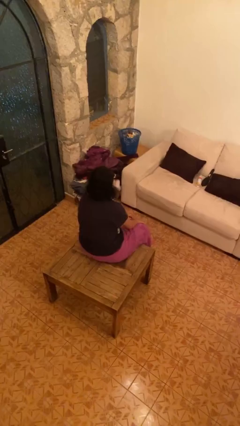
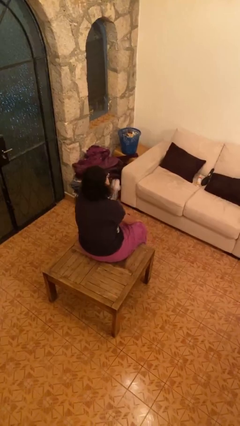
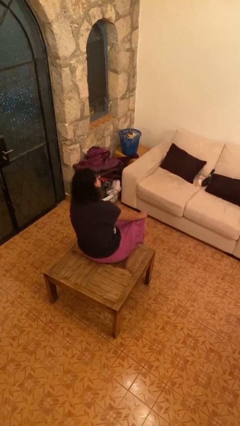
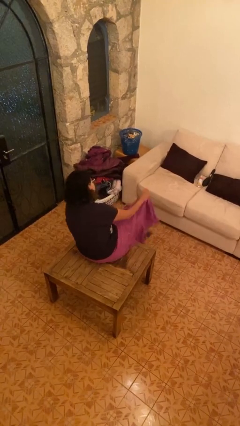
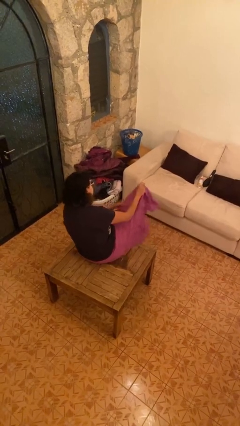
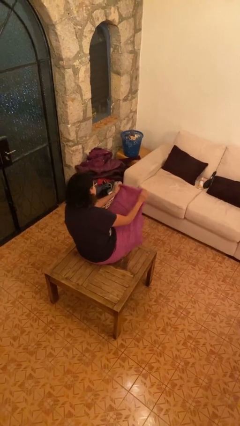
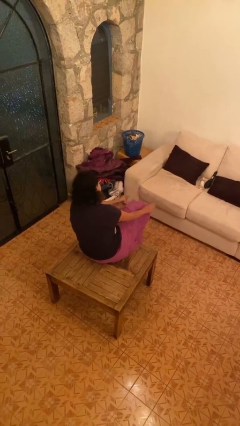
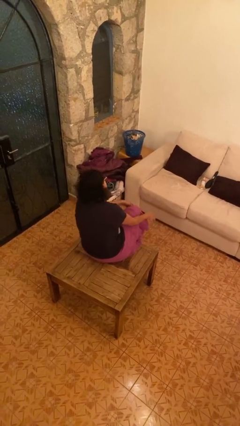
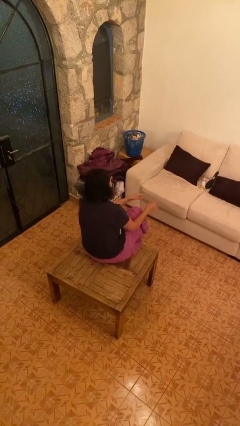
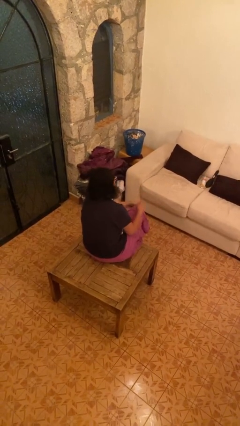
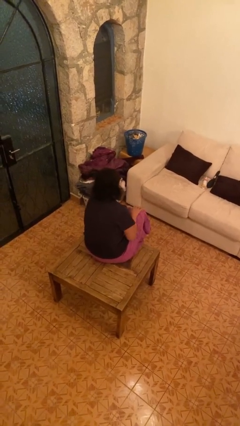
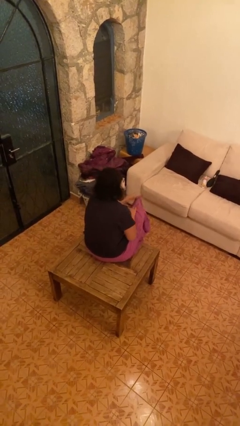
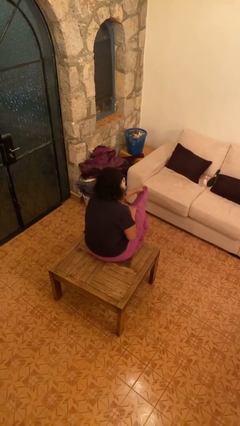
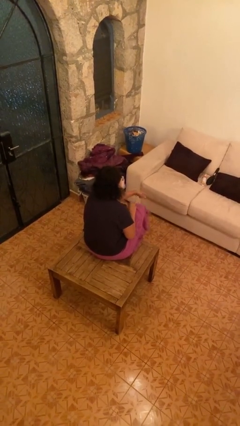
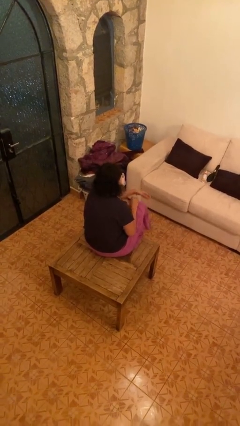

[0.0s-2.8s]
person crosses legs

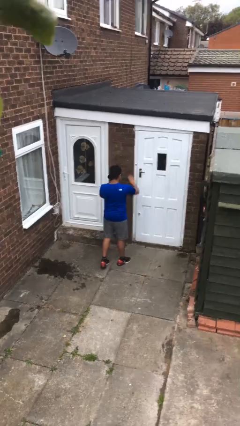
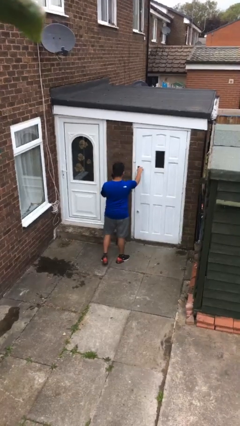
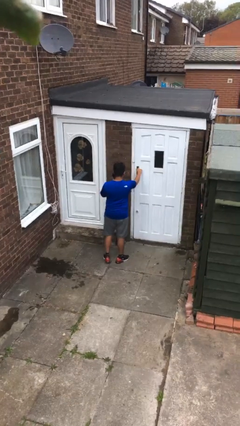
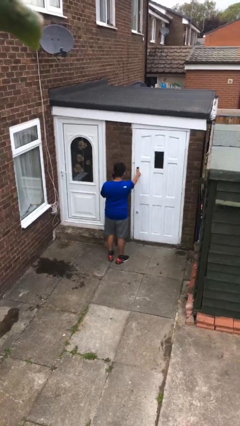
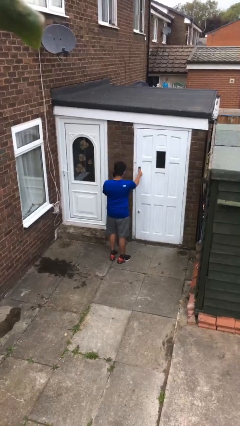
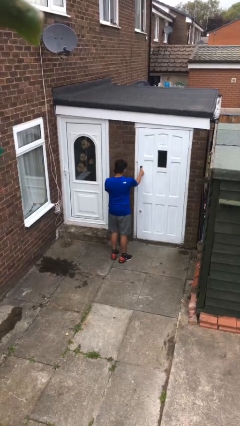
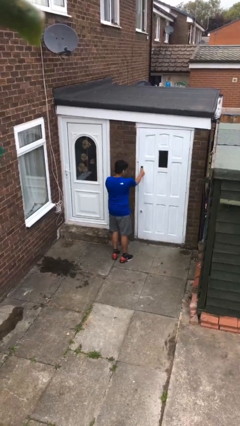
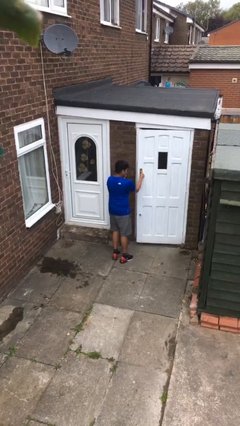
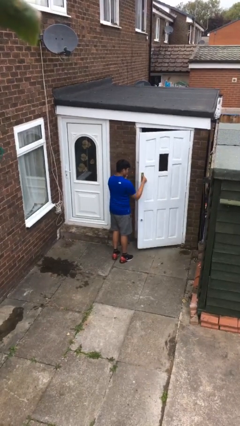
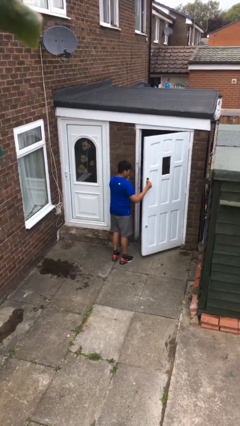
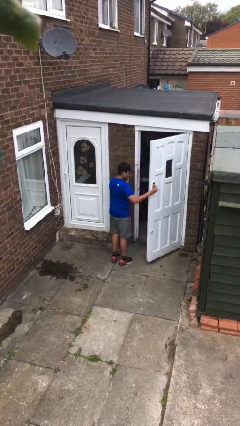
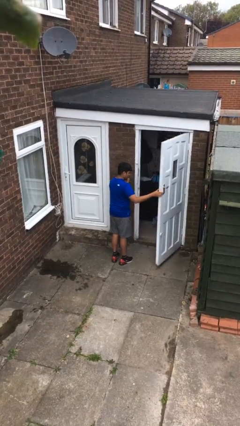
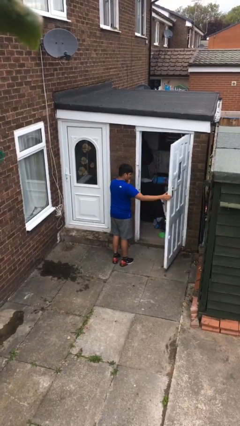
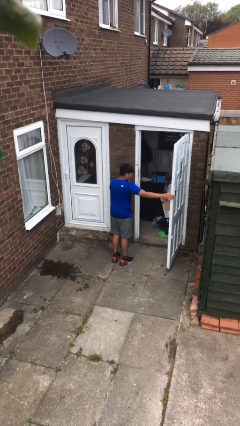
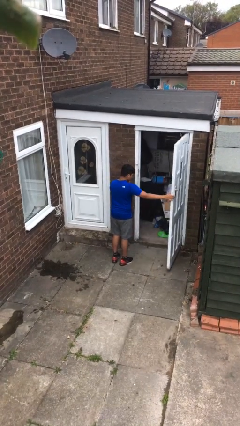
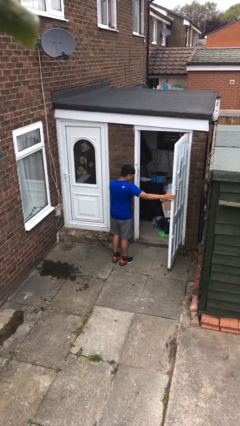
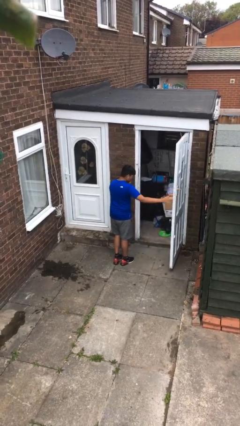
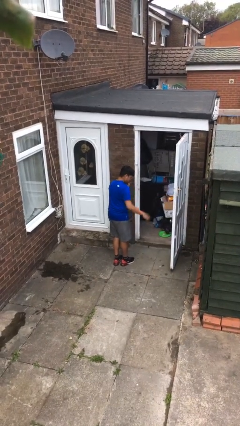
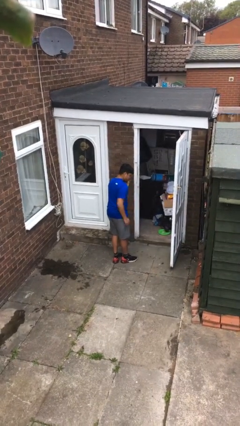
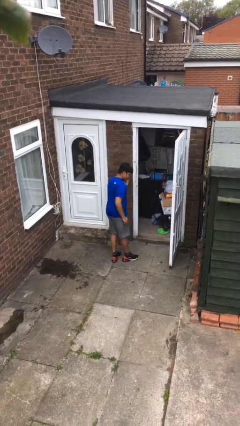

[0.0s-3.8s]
person opens facility door

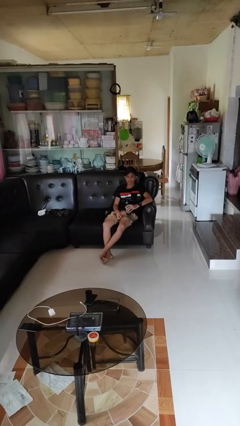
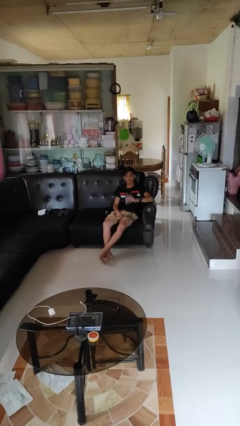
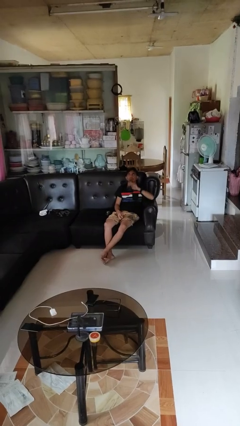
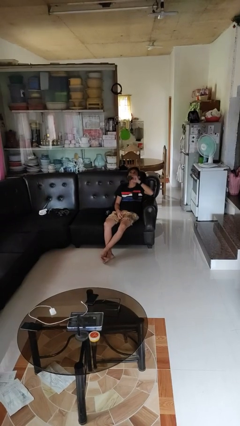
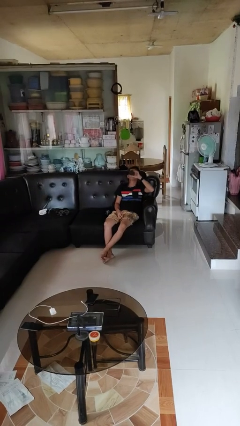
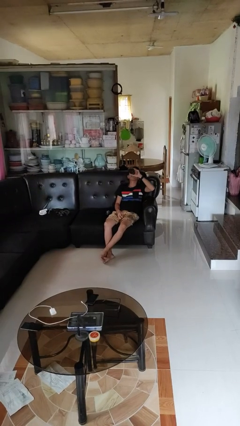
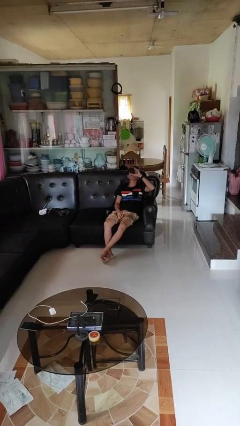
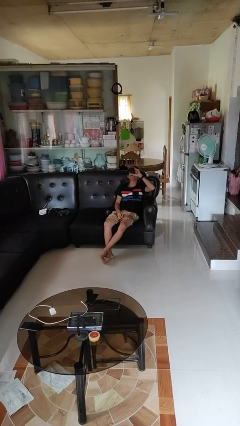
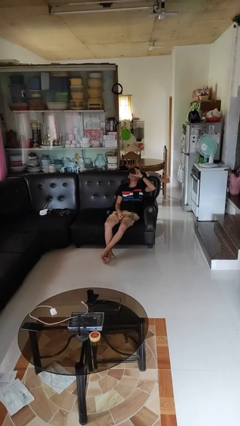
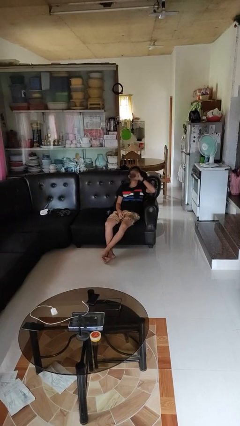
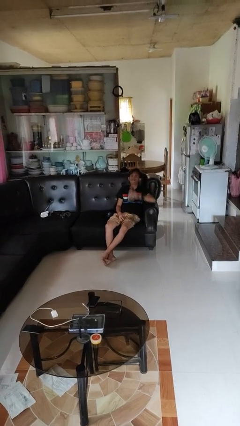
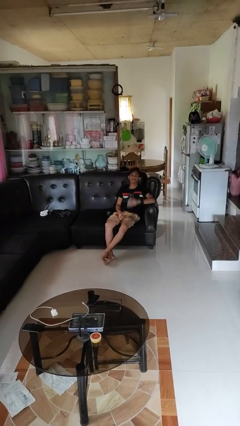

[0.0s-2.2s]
person drinks from bottle

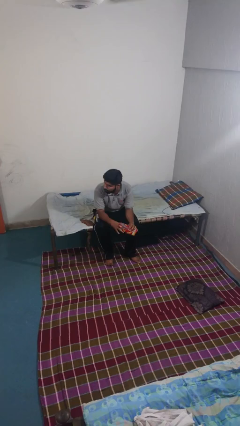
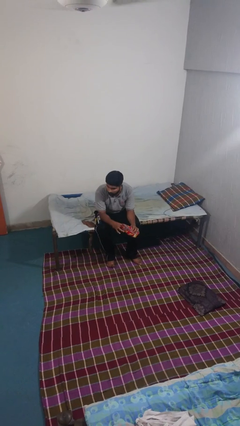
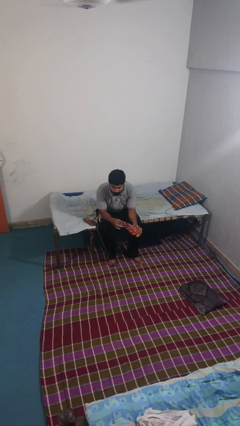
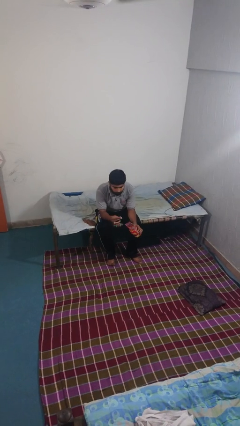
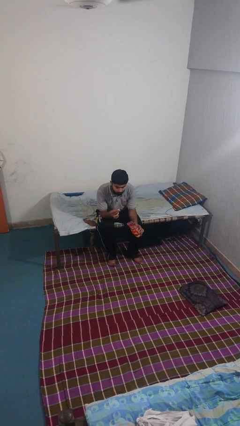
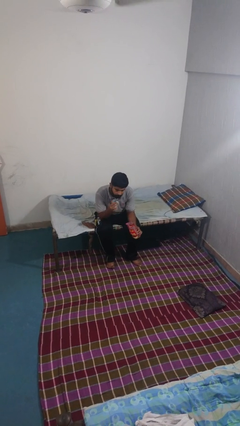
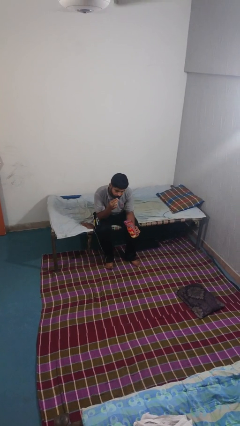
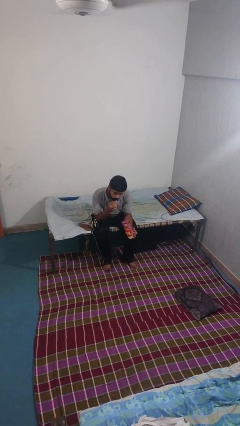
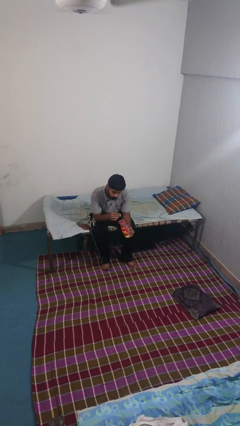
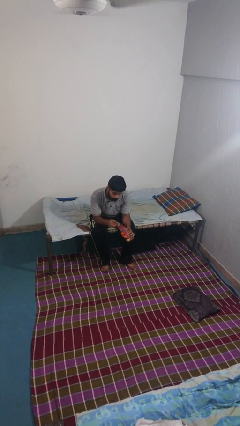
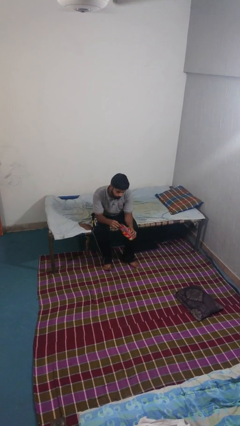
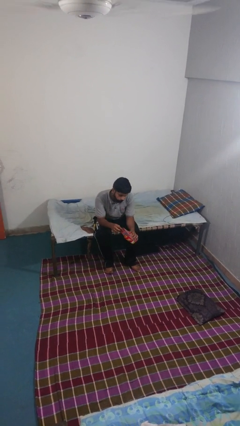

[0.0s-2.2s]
person eats snack from bag

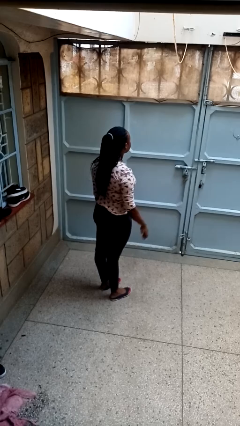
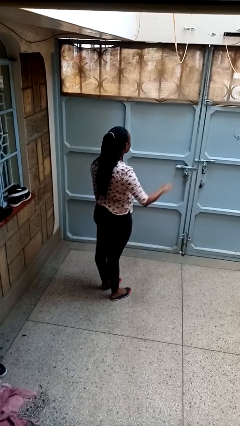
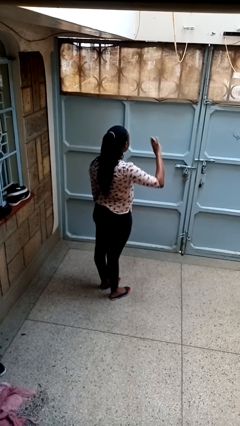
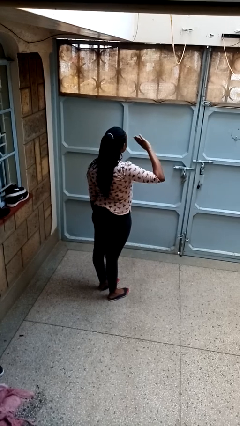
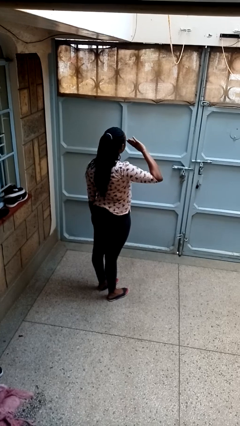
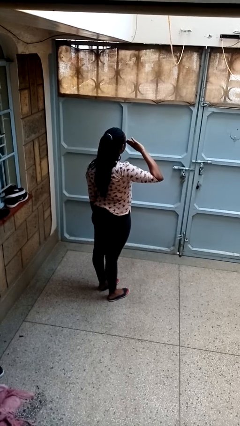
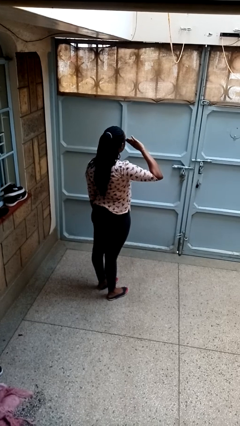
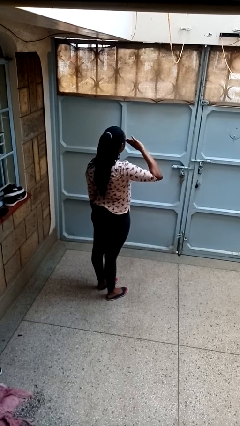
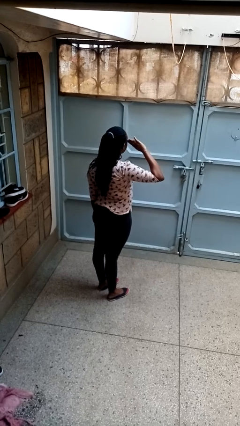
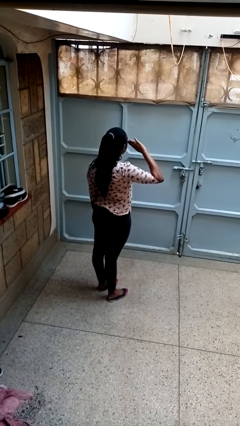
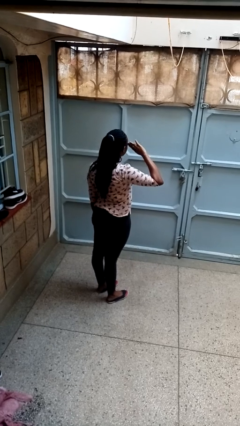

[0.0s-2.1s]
person salutes

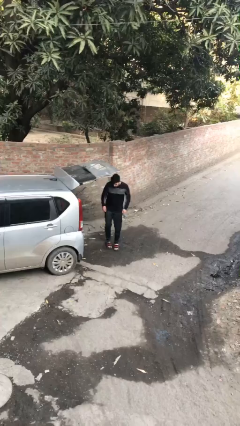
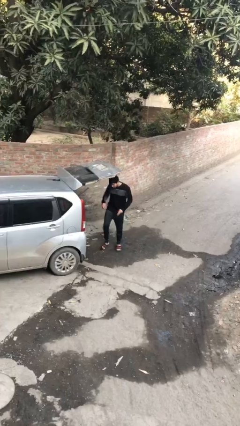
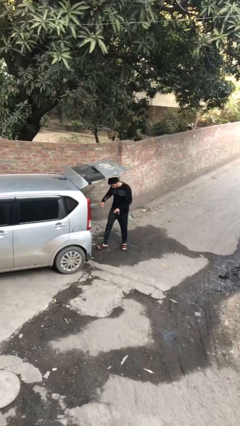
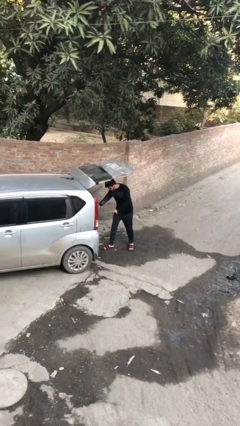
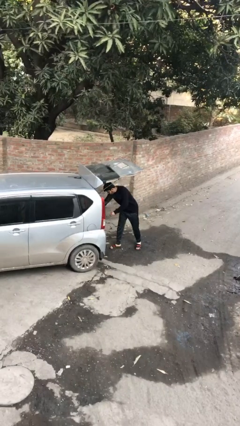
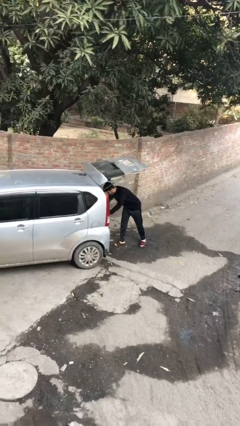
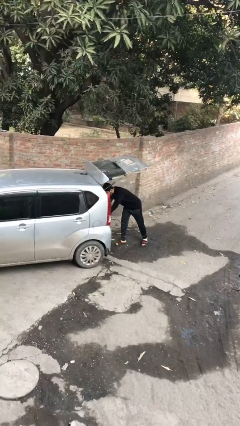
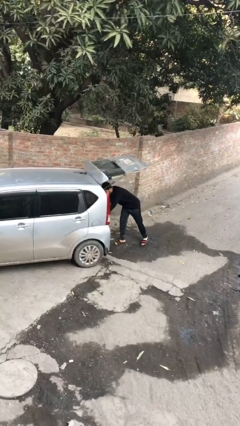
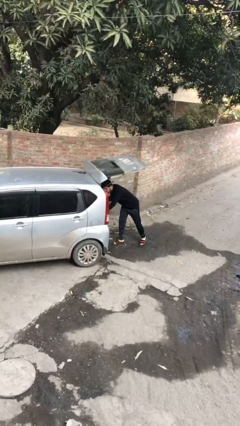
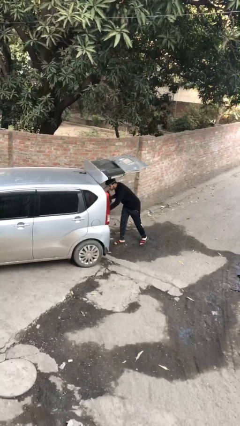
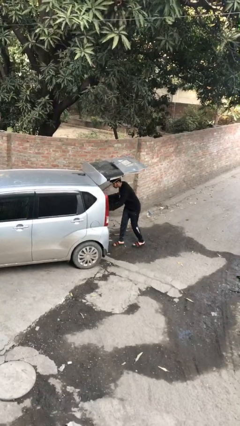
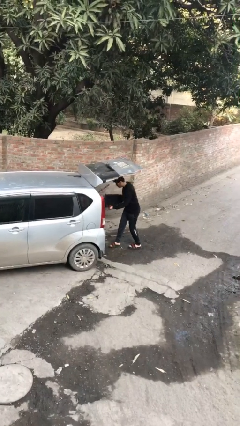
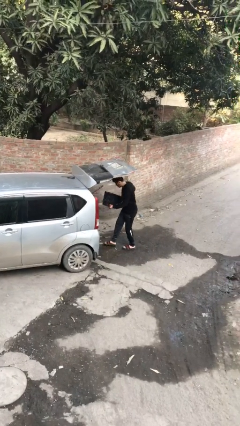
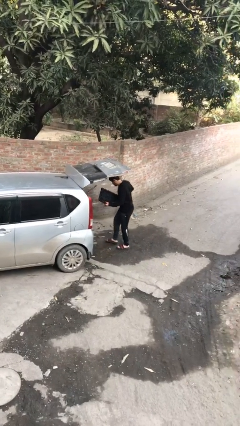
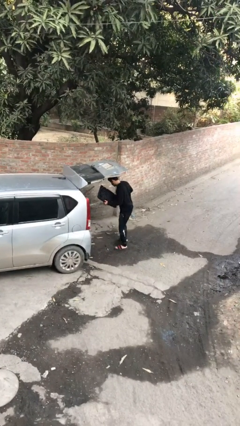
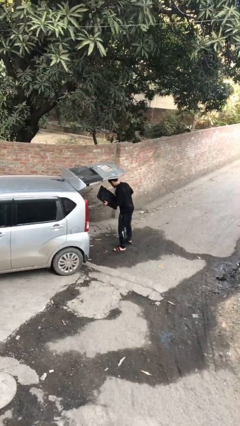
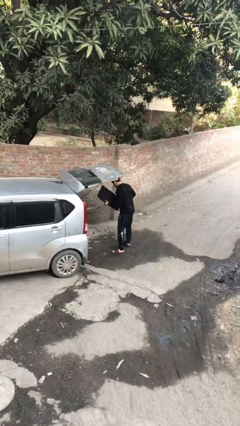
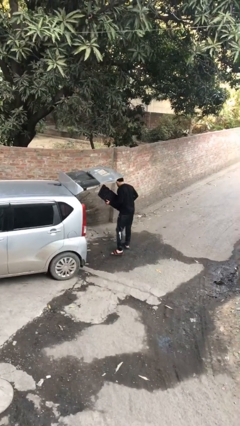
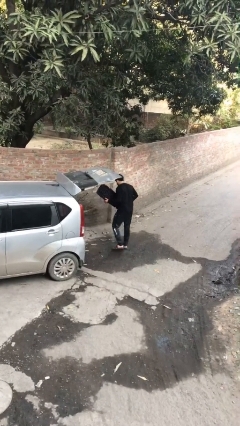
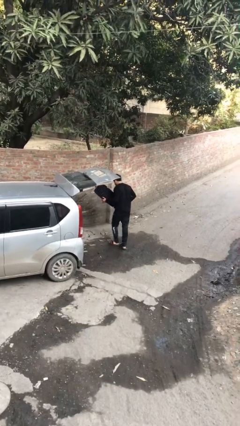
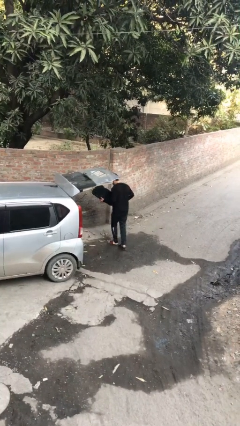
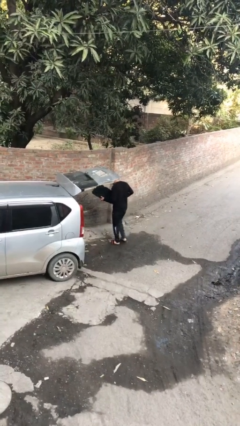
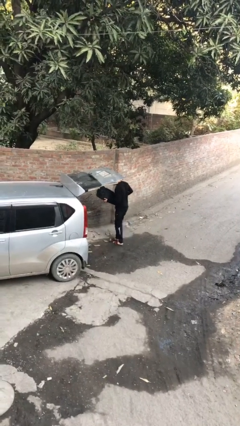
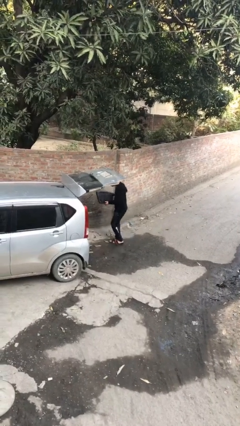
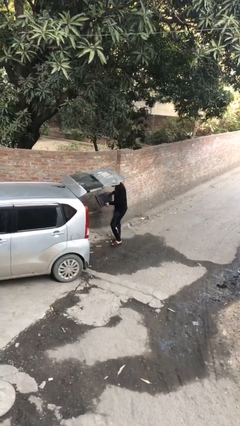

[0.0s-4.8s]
person unloads car
